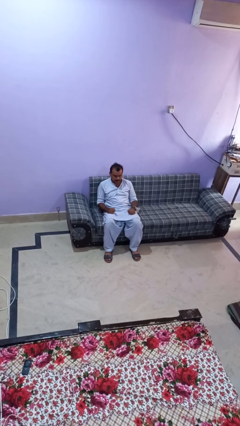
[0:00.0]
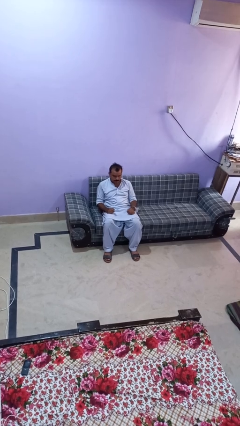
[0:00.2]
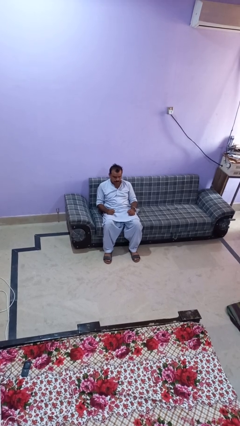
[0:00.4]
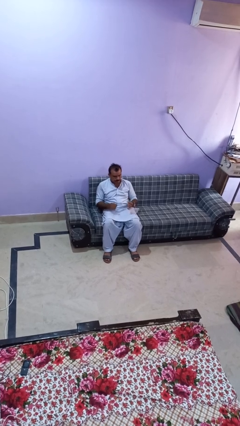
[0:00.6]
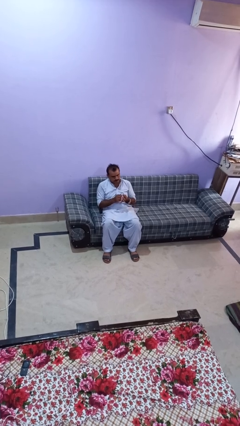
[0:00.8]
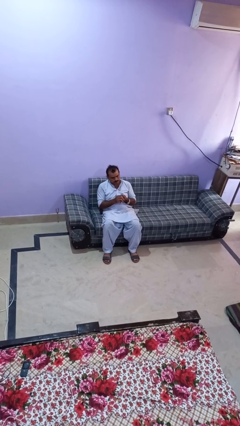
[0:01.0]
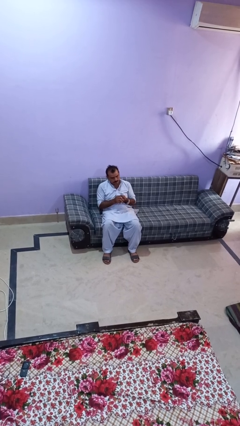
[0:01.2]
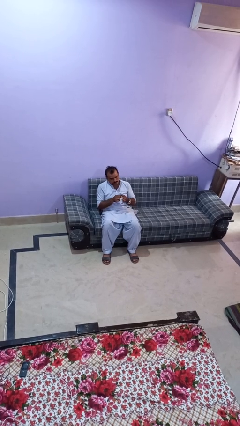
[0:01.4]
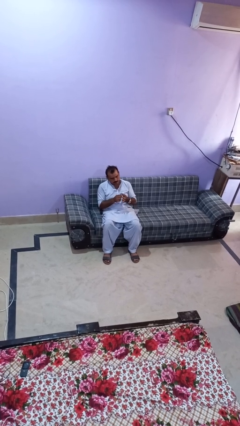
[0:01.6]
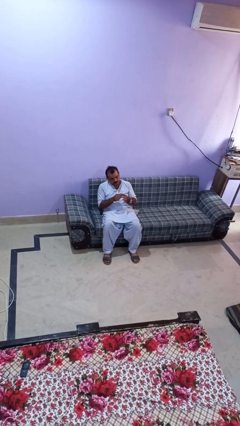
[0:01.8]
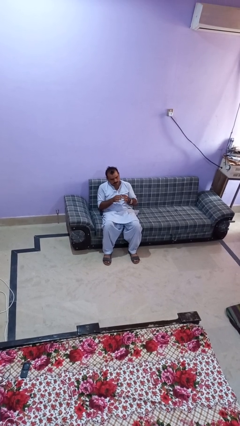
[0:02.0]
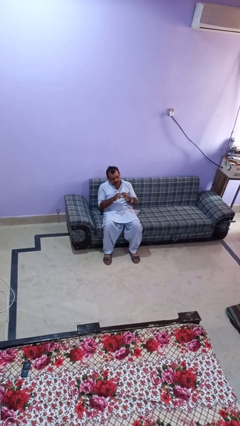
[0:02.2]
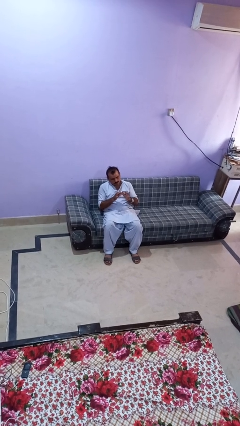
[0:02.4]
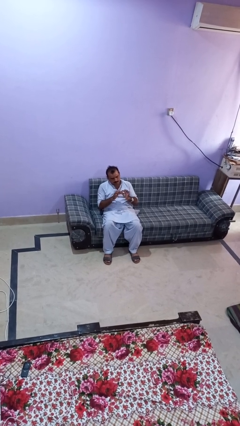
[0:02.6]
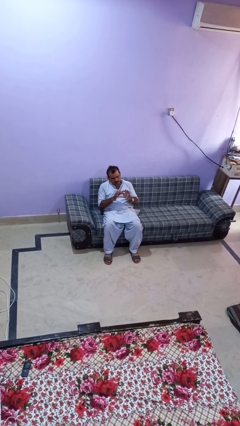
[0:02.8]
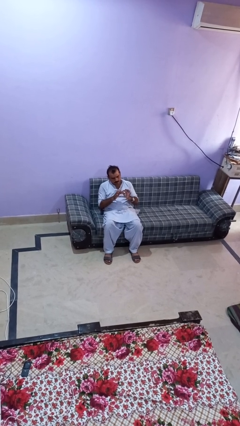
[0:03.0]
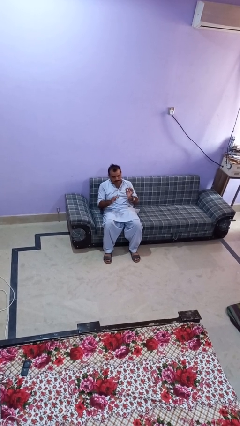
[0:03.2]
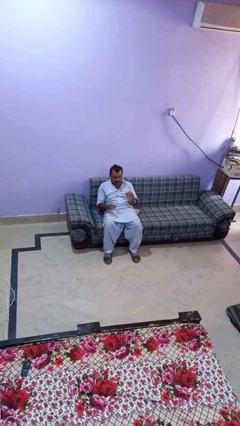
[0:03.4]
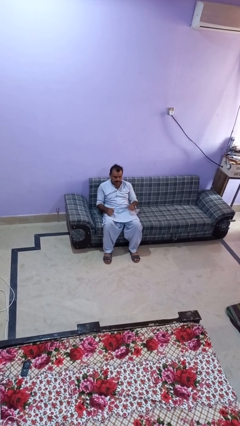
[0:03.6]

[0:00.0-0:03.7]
person files fingernails

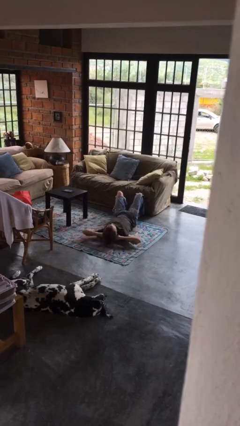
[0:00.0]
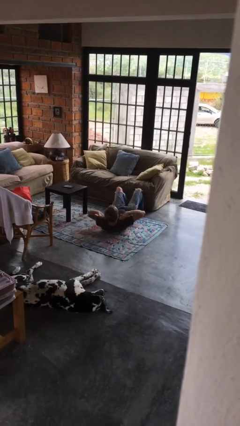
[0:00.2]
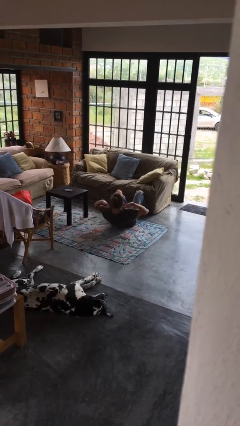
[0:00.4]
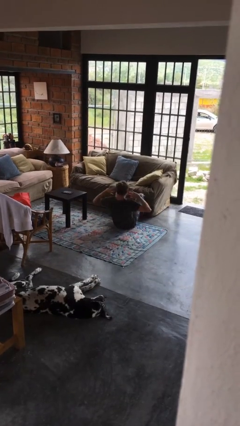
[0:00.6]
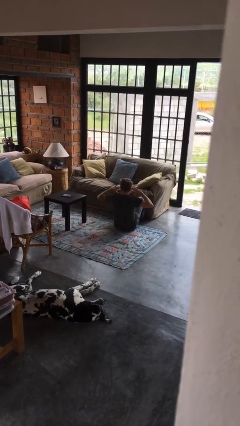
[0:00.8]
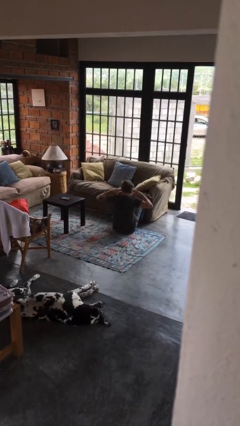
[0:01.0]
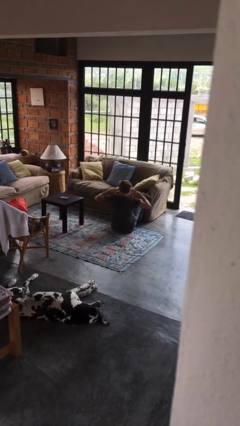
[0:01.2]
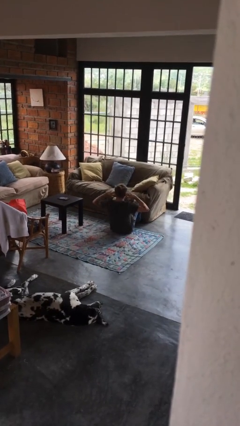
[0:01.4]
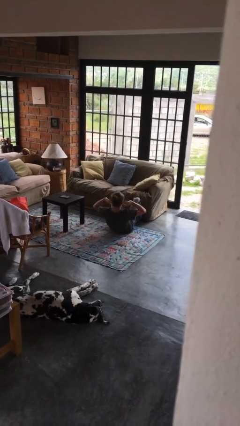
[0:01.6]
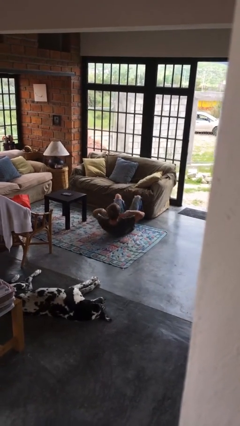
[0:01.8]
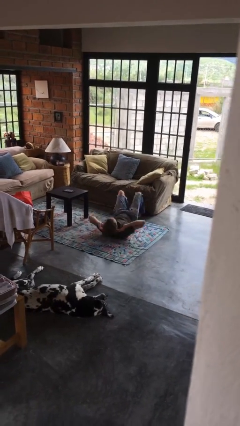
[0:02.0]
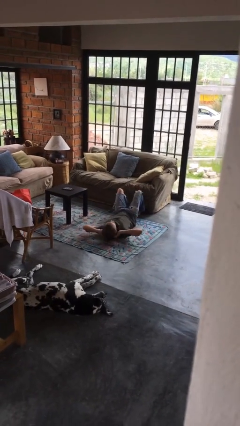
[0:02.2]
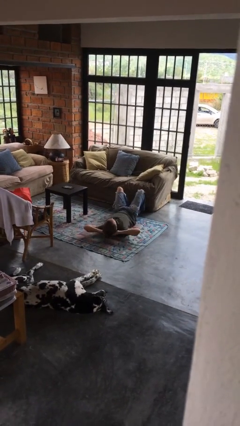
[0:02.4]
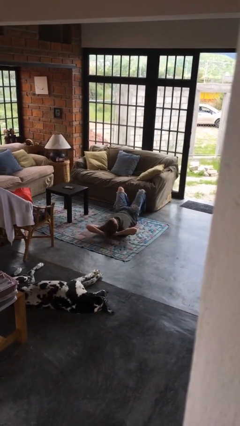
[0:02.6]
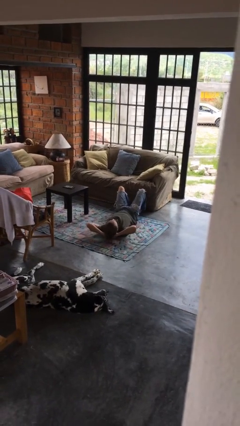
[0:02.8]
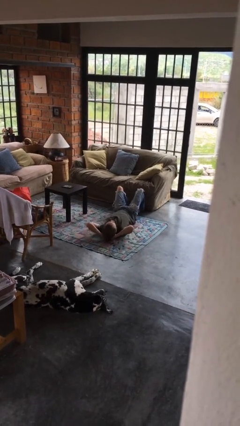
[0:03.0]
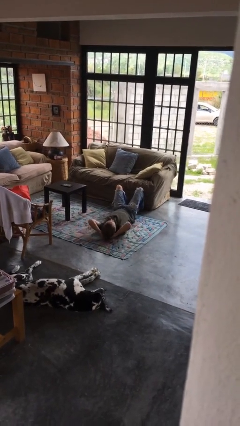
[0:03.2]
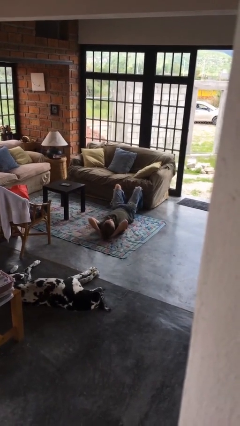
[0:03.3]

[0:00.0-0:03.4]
person exercises with situp

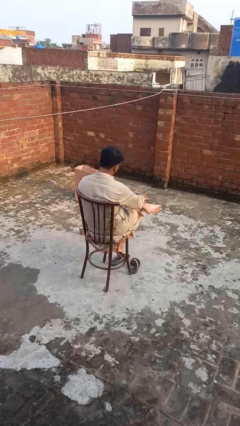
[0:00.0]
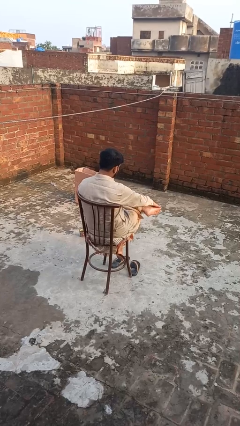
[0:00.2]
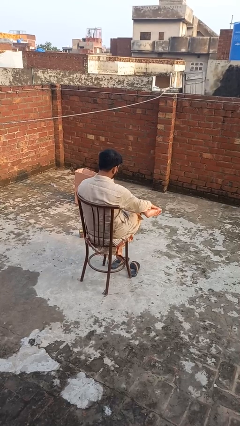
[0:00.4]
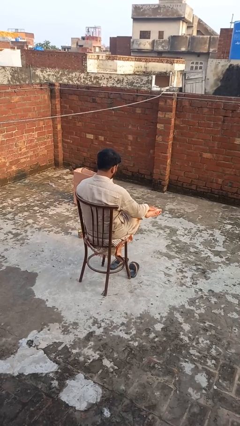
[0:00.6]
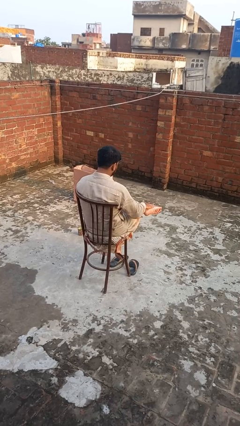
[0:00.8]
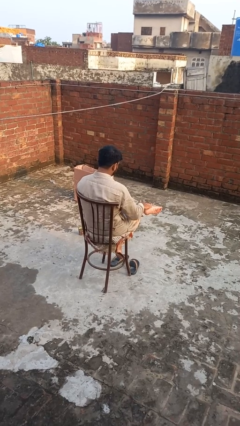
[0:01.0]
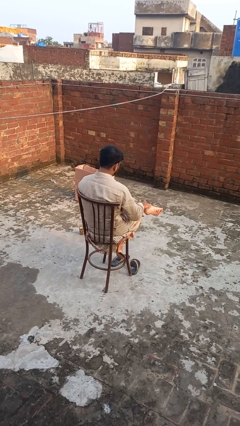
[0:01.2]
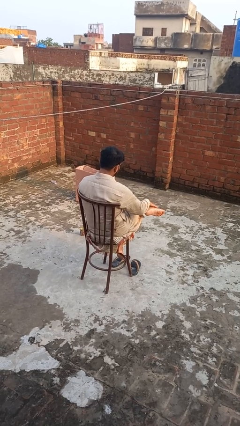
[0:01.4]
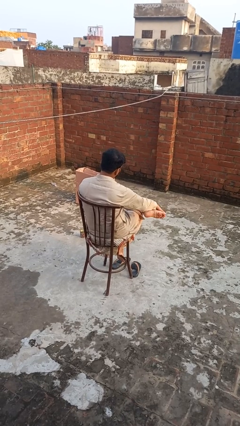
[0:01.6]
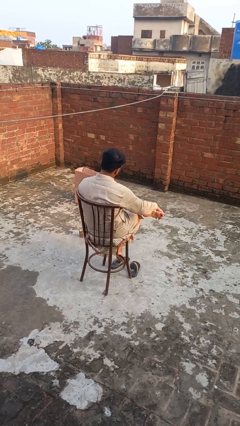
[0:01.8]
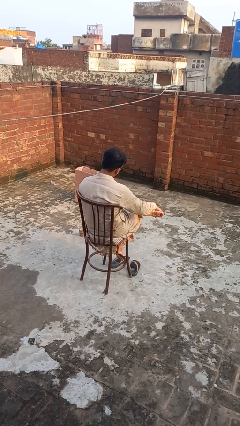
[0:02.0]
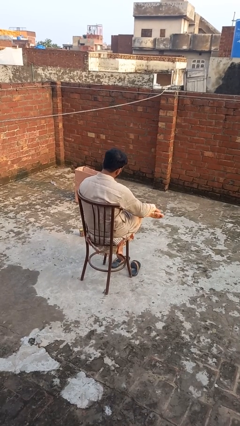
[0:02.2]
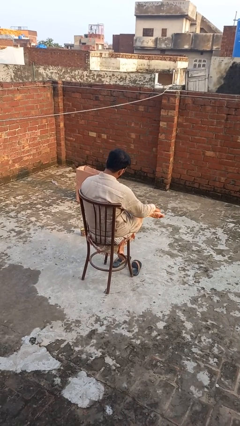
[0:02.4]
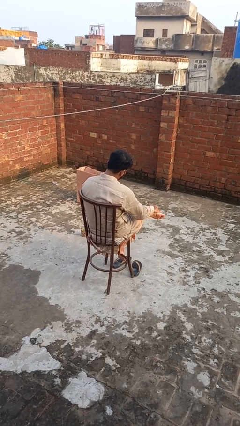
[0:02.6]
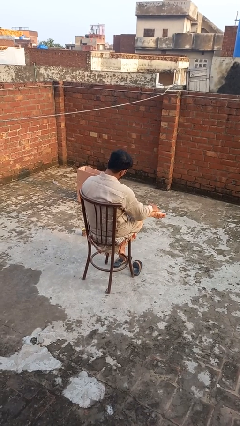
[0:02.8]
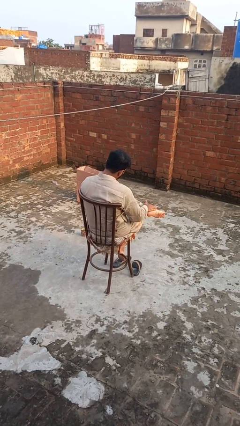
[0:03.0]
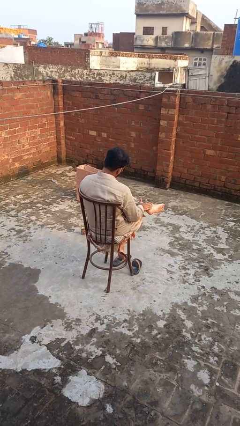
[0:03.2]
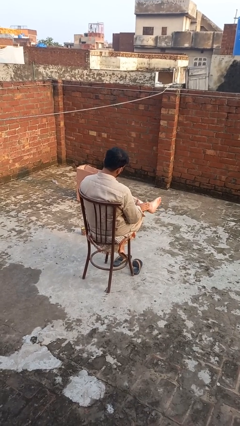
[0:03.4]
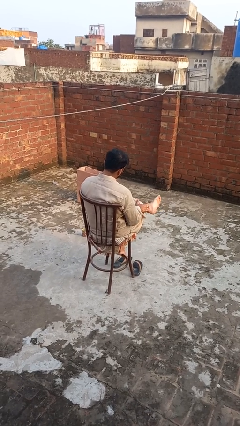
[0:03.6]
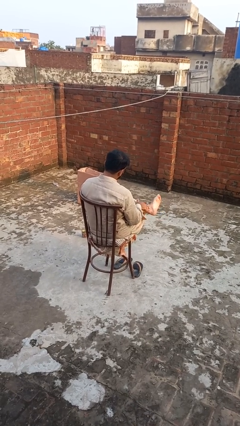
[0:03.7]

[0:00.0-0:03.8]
person rubs foot

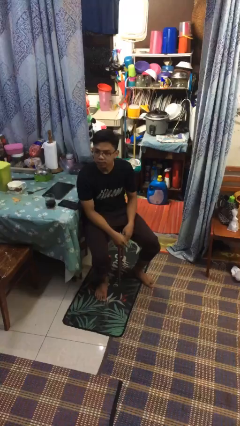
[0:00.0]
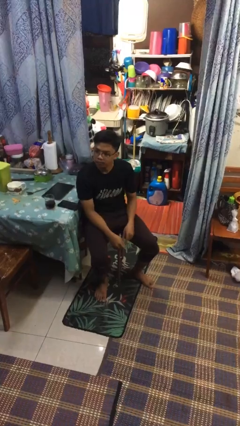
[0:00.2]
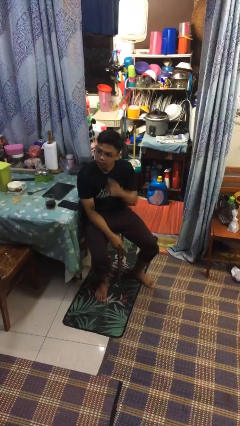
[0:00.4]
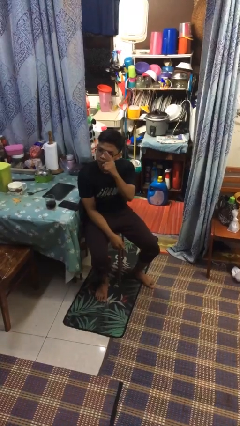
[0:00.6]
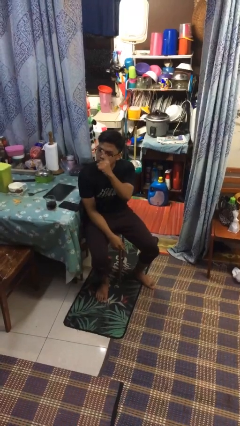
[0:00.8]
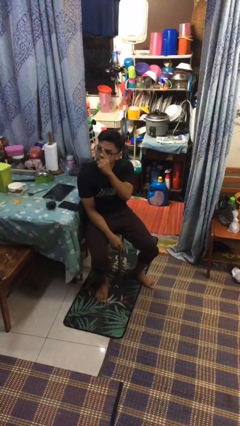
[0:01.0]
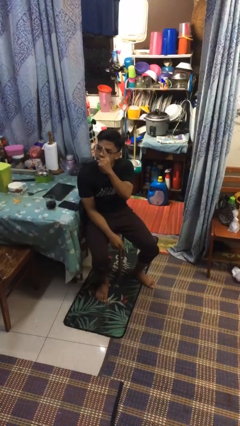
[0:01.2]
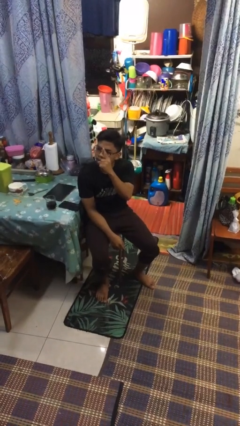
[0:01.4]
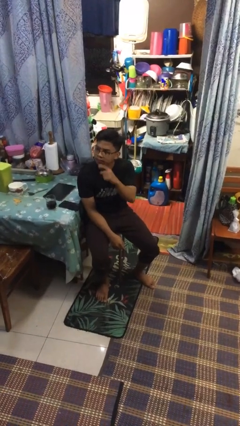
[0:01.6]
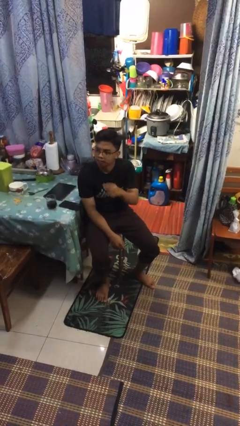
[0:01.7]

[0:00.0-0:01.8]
person gestures number one

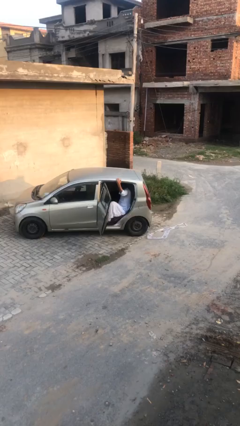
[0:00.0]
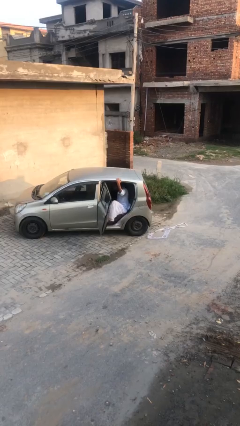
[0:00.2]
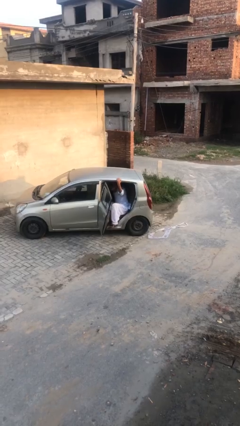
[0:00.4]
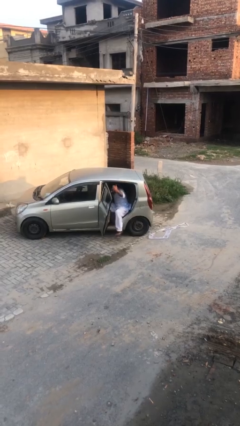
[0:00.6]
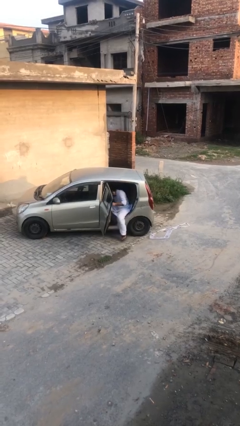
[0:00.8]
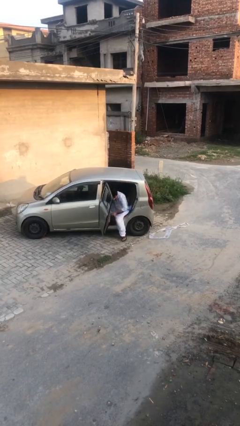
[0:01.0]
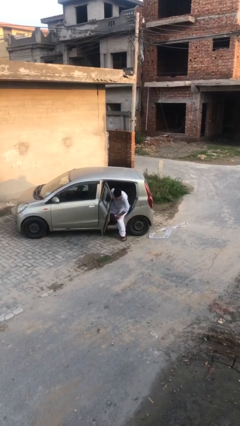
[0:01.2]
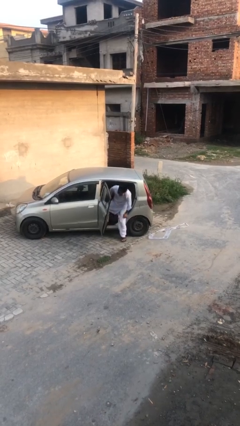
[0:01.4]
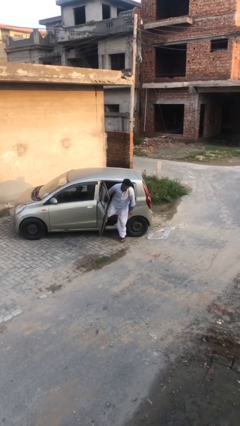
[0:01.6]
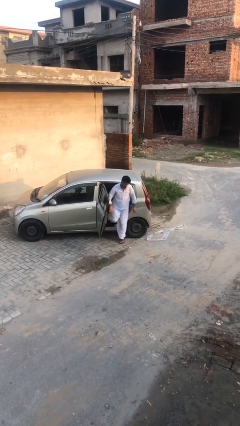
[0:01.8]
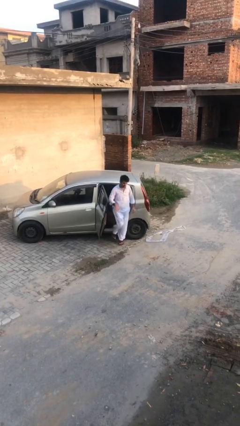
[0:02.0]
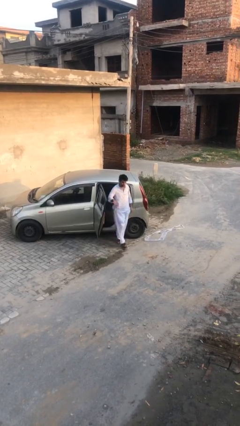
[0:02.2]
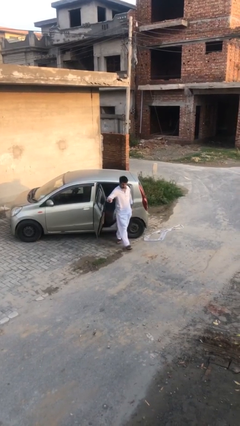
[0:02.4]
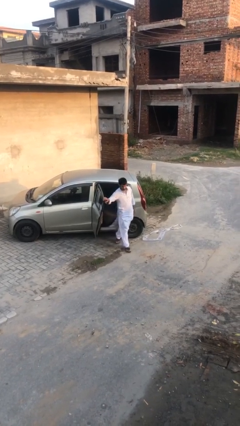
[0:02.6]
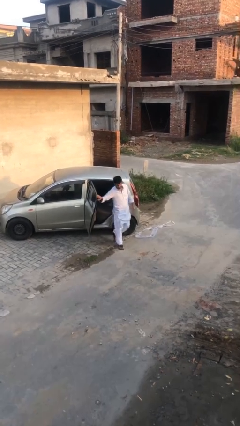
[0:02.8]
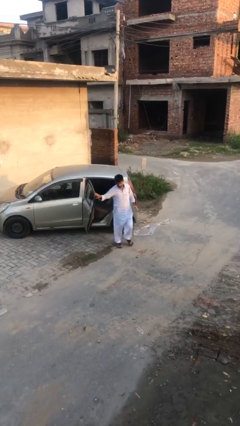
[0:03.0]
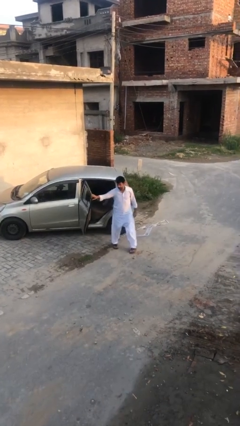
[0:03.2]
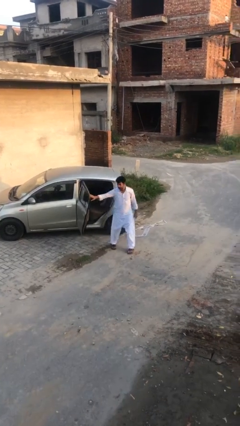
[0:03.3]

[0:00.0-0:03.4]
person exits car

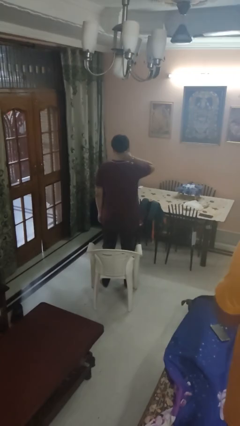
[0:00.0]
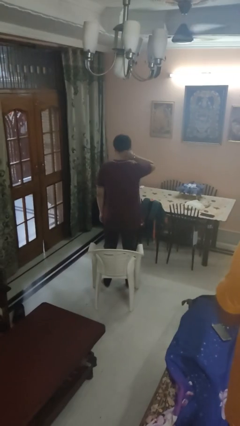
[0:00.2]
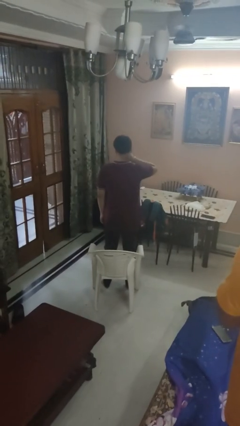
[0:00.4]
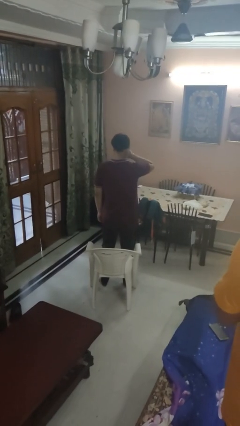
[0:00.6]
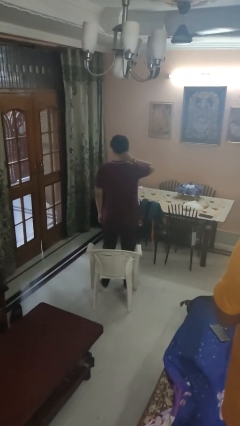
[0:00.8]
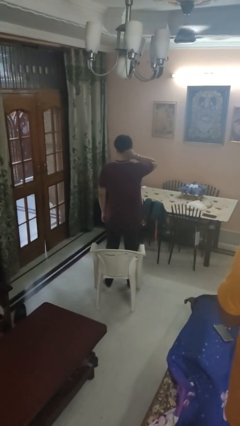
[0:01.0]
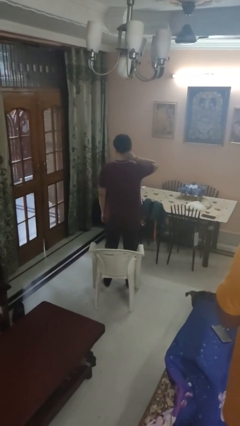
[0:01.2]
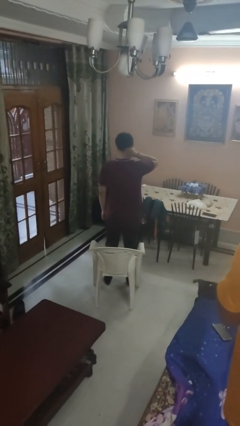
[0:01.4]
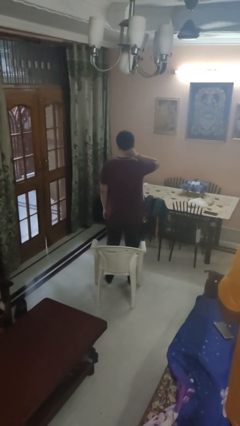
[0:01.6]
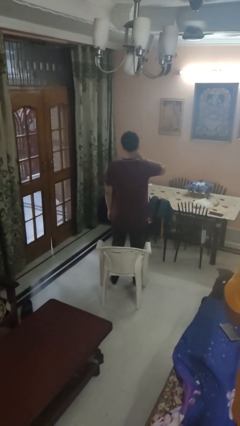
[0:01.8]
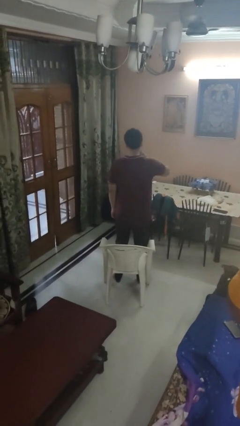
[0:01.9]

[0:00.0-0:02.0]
person rubs neck
